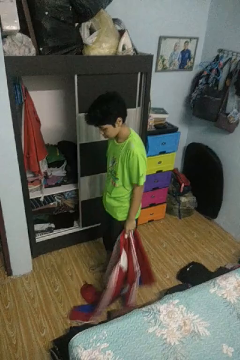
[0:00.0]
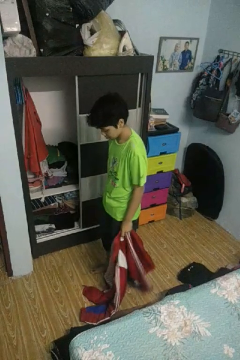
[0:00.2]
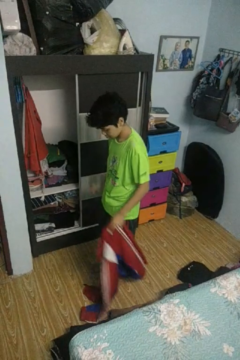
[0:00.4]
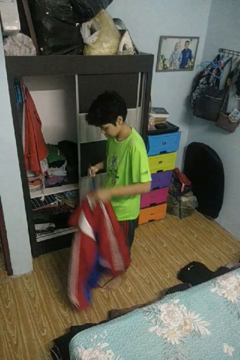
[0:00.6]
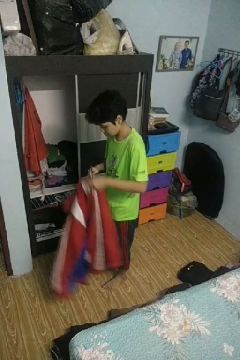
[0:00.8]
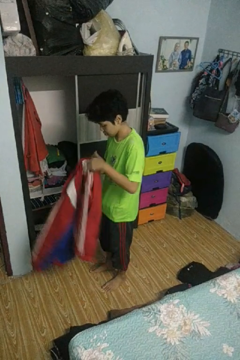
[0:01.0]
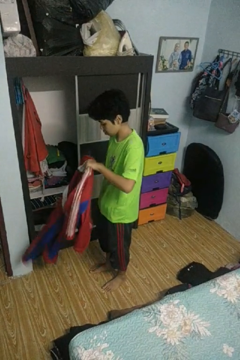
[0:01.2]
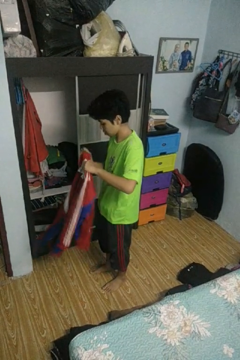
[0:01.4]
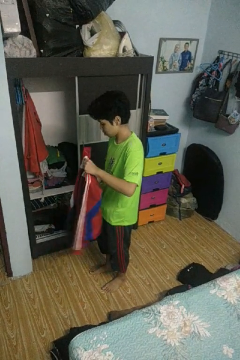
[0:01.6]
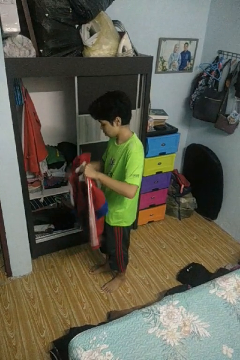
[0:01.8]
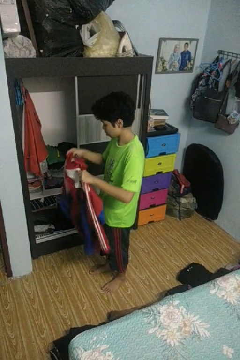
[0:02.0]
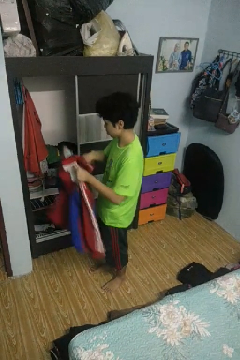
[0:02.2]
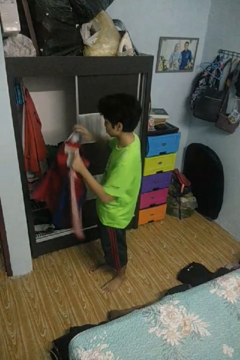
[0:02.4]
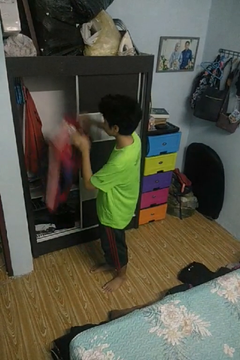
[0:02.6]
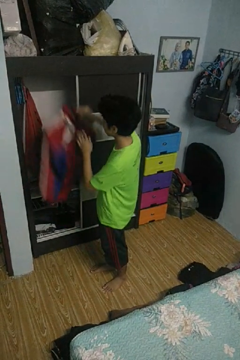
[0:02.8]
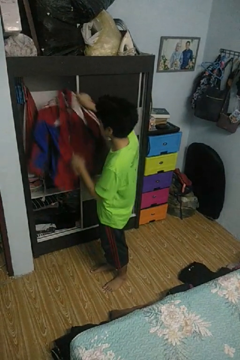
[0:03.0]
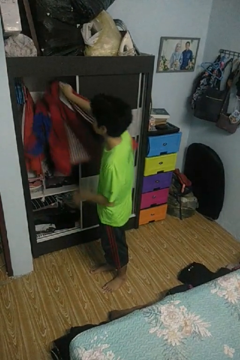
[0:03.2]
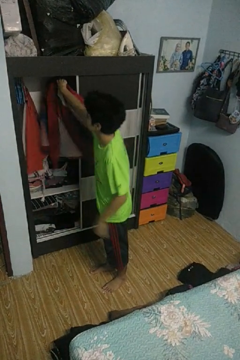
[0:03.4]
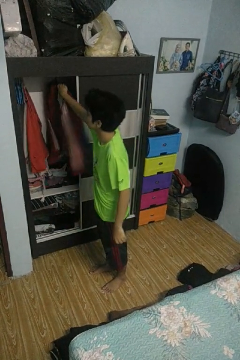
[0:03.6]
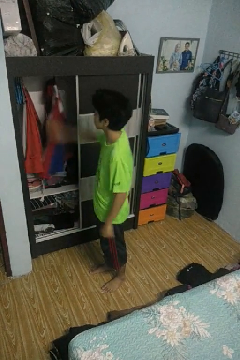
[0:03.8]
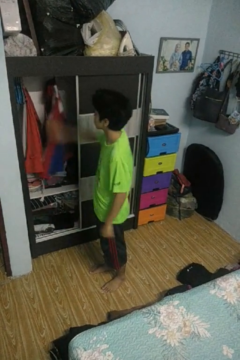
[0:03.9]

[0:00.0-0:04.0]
person puts clothes into closet

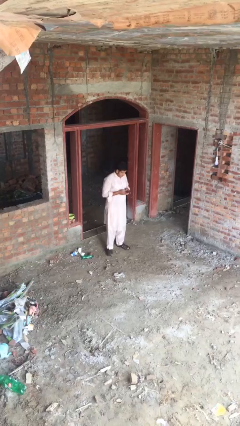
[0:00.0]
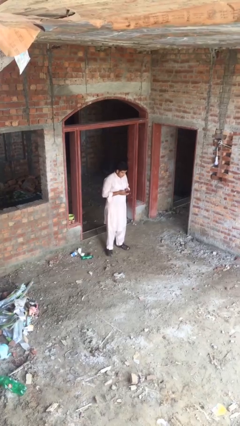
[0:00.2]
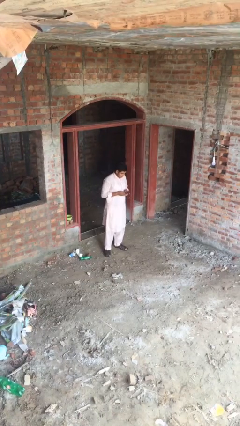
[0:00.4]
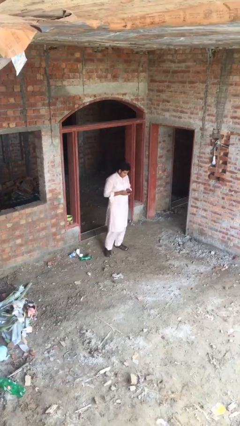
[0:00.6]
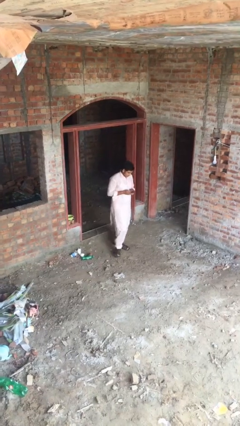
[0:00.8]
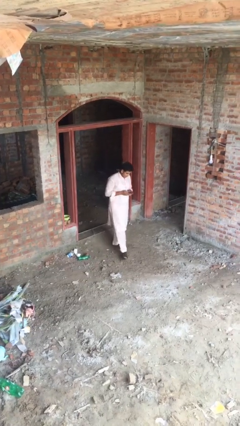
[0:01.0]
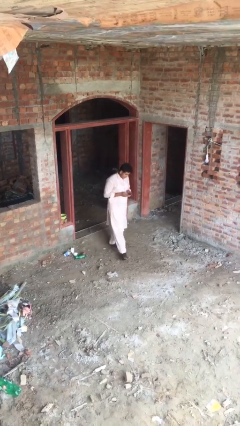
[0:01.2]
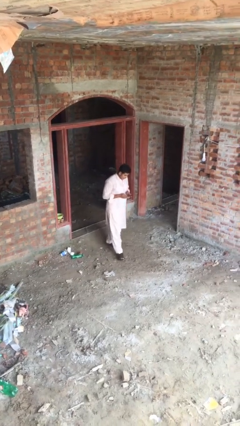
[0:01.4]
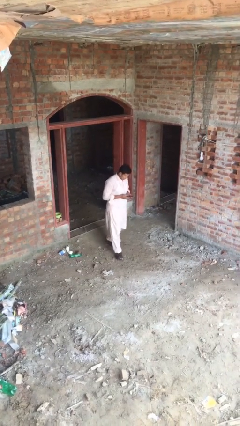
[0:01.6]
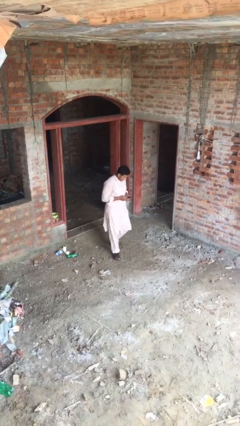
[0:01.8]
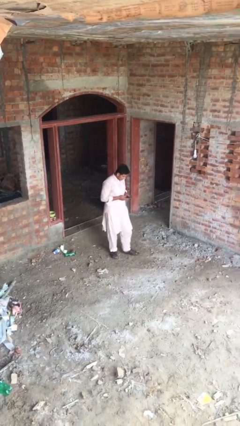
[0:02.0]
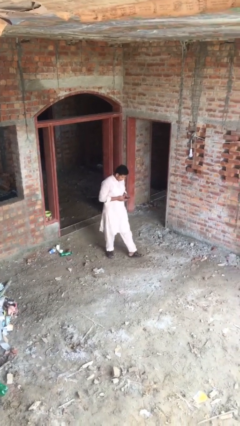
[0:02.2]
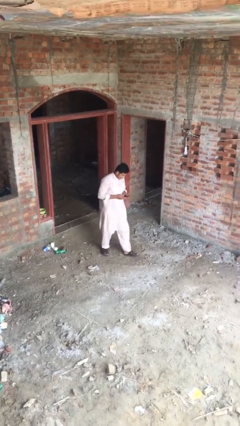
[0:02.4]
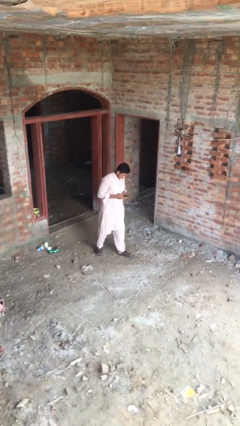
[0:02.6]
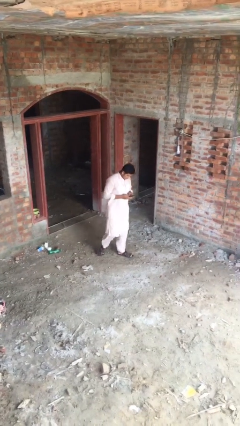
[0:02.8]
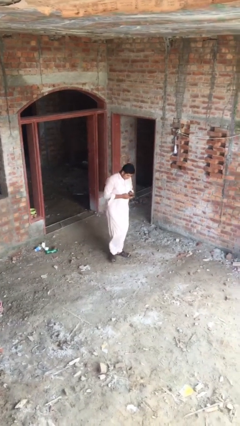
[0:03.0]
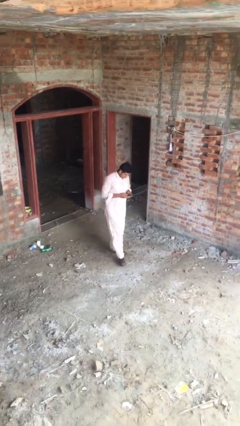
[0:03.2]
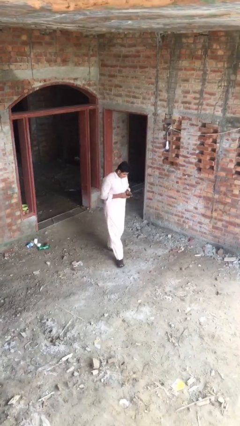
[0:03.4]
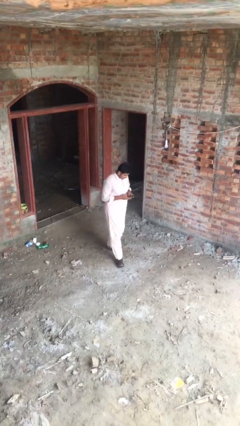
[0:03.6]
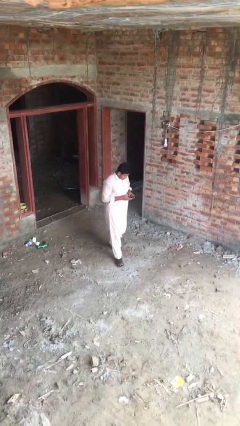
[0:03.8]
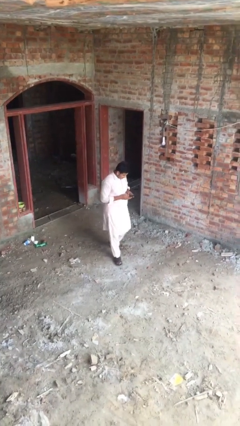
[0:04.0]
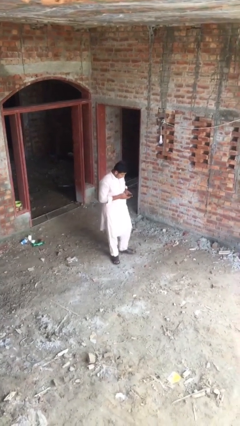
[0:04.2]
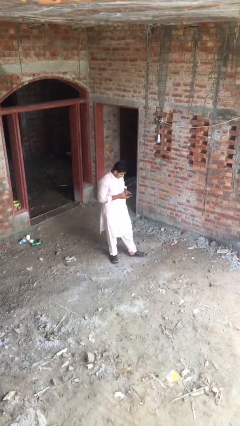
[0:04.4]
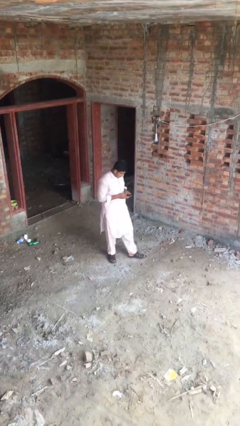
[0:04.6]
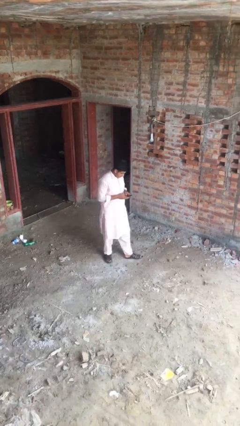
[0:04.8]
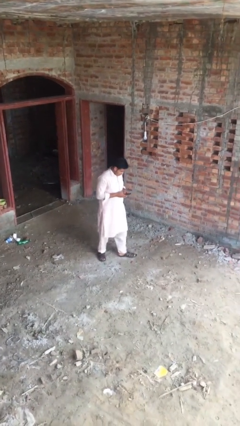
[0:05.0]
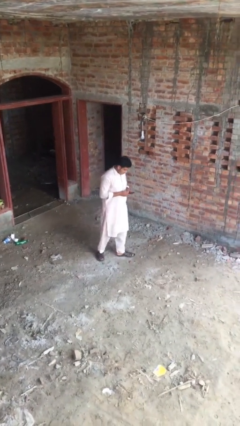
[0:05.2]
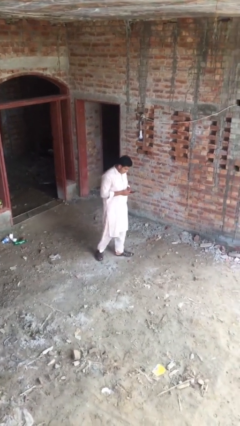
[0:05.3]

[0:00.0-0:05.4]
person texts on phone

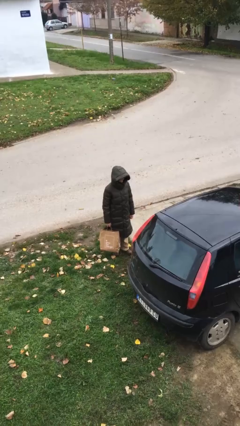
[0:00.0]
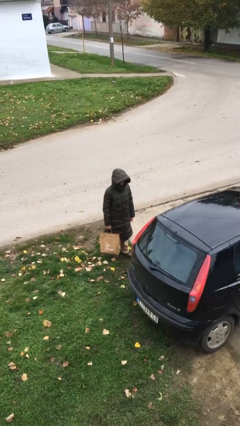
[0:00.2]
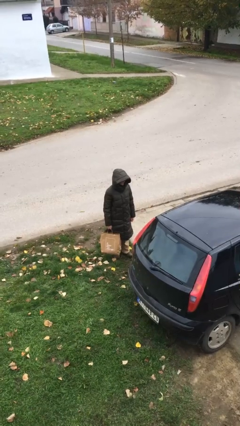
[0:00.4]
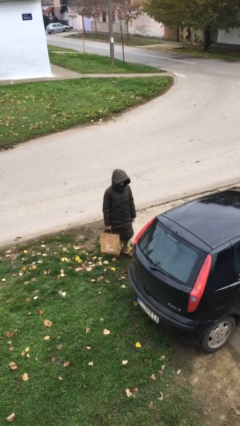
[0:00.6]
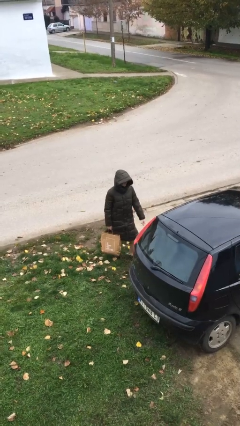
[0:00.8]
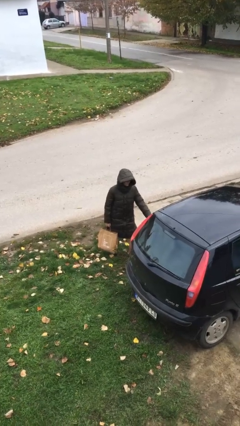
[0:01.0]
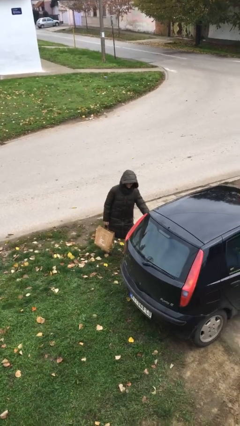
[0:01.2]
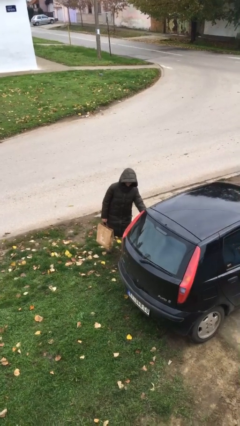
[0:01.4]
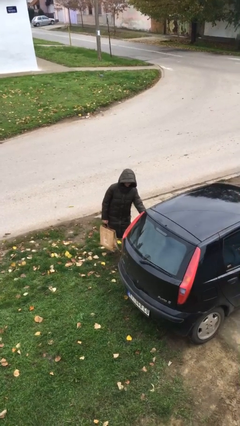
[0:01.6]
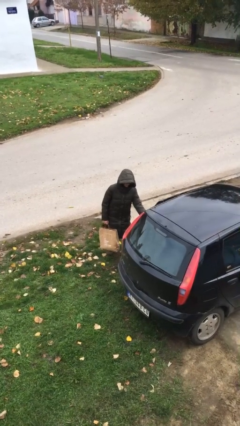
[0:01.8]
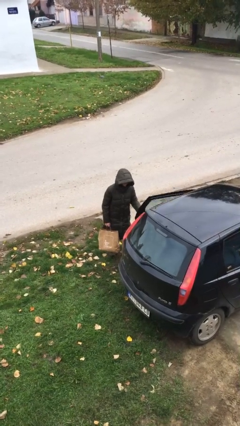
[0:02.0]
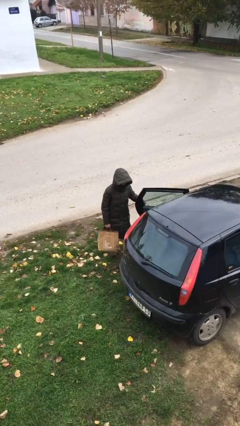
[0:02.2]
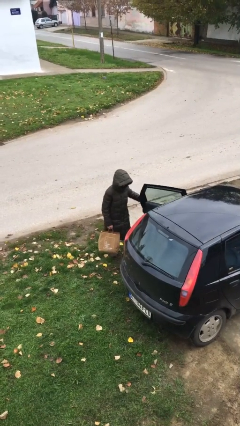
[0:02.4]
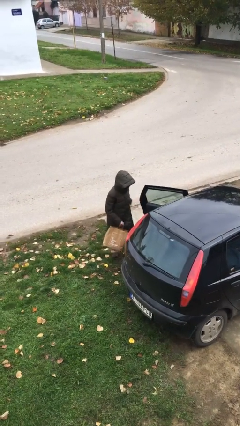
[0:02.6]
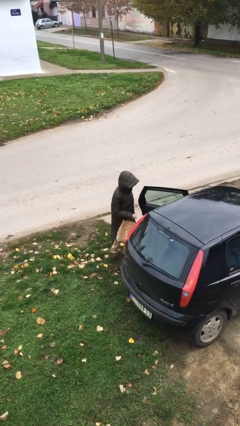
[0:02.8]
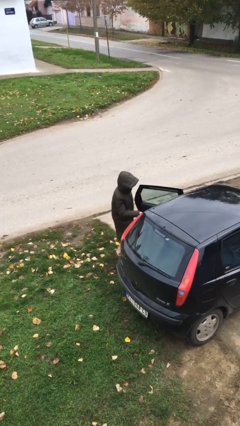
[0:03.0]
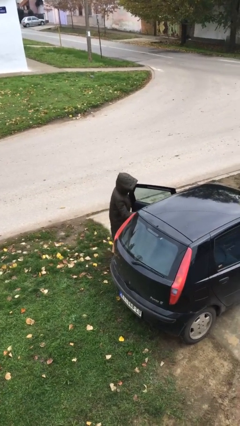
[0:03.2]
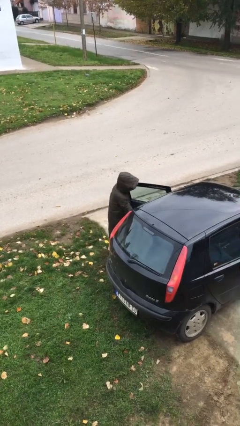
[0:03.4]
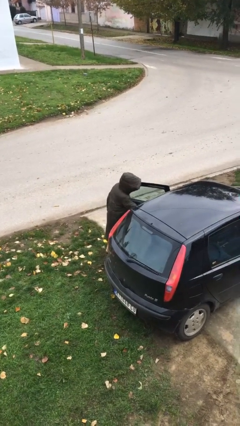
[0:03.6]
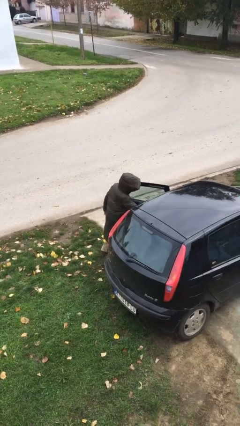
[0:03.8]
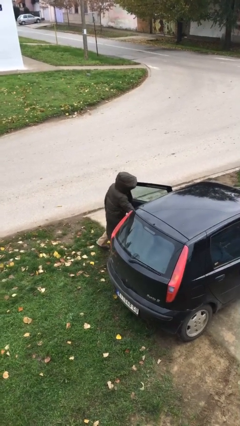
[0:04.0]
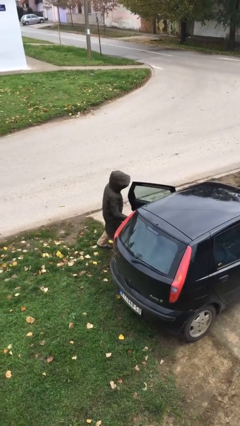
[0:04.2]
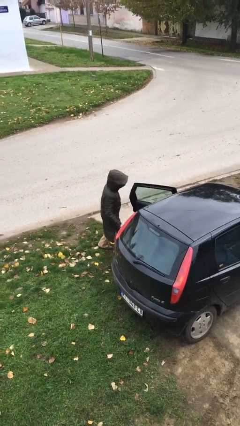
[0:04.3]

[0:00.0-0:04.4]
person loads car

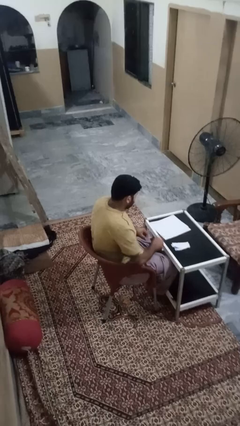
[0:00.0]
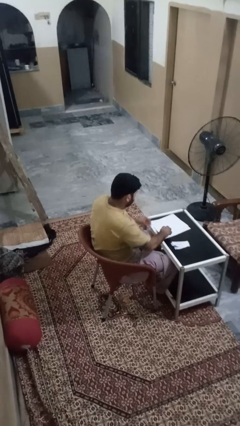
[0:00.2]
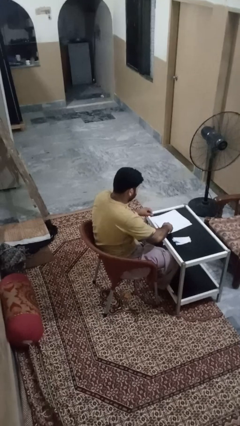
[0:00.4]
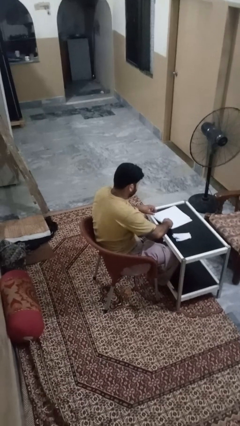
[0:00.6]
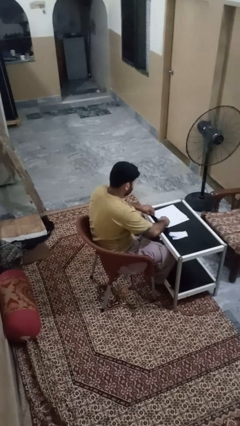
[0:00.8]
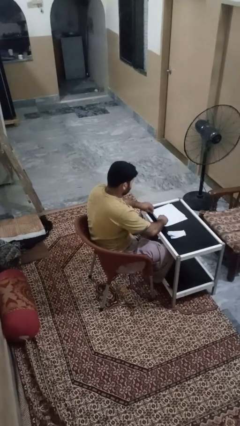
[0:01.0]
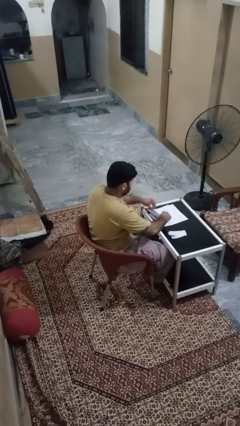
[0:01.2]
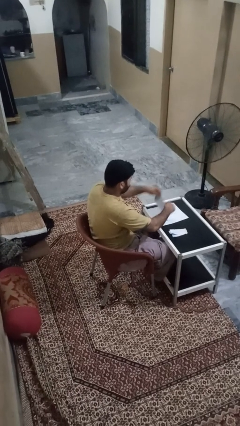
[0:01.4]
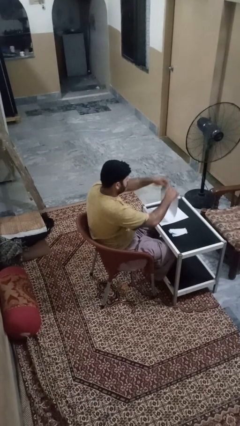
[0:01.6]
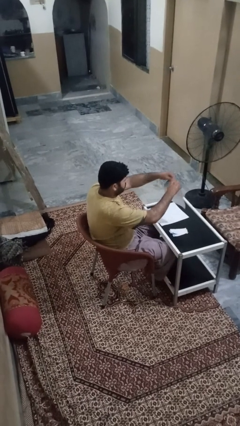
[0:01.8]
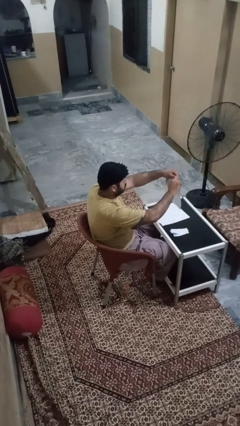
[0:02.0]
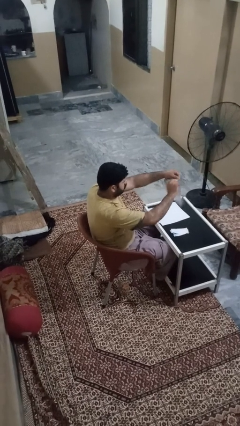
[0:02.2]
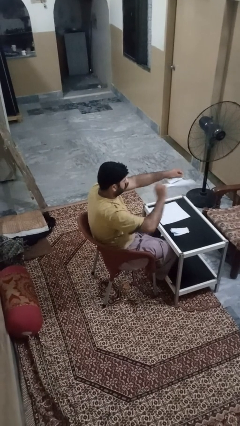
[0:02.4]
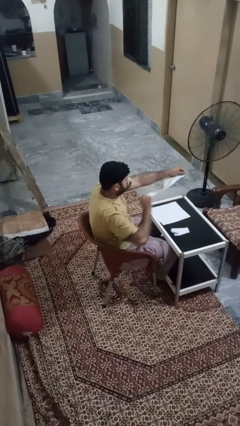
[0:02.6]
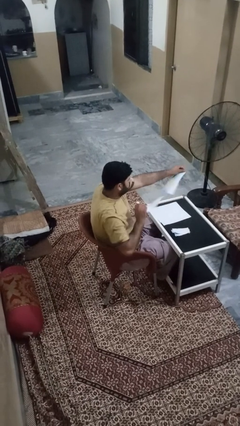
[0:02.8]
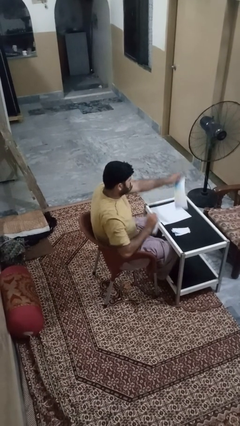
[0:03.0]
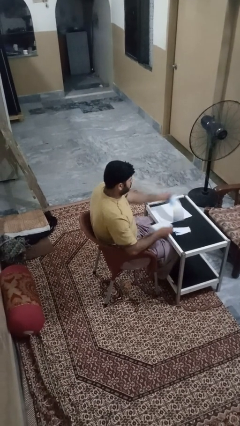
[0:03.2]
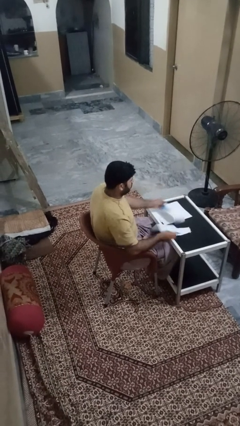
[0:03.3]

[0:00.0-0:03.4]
person tears paper

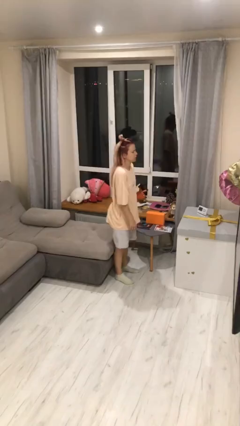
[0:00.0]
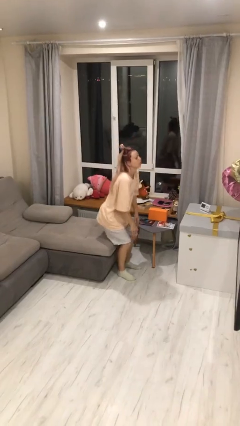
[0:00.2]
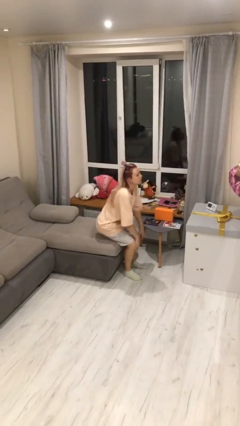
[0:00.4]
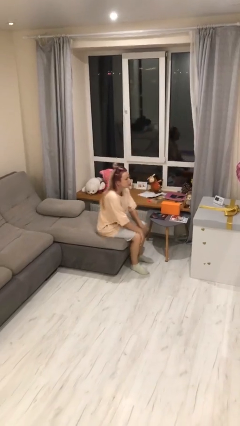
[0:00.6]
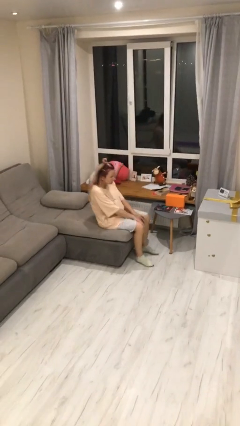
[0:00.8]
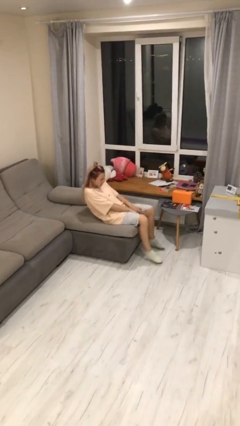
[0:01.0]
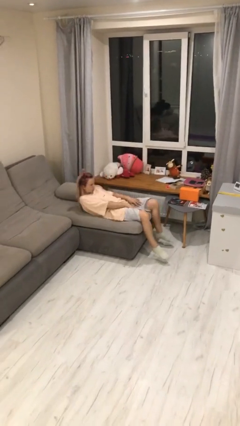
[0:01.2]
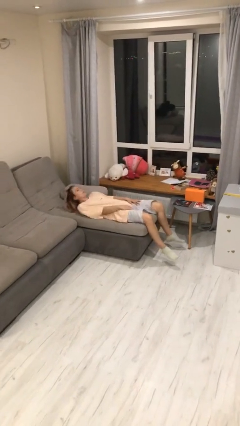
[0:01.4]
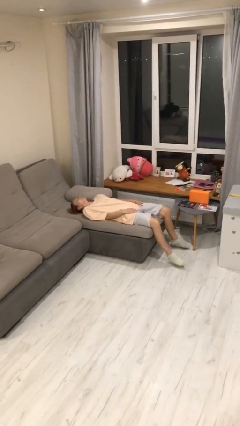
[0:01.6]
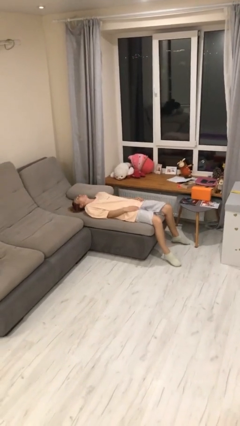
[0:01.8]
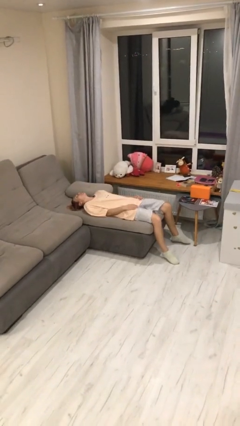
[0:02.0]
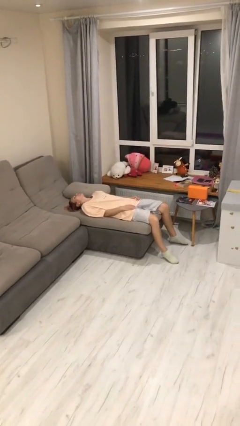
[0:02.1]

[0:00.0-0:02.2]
person lies down on couch
